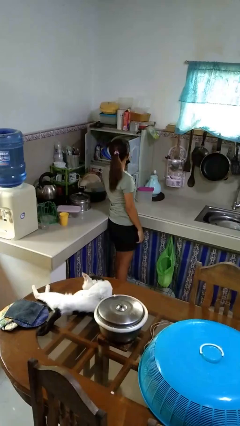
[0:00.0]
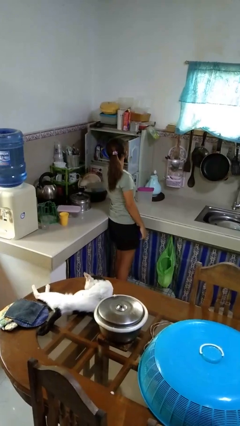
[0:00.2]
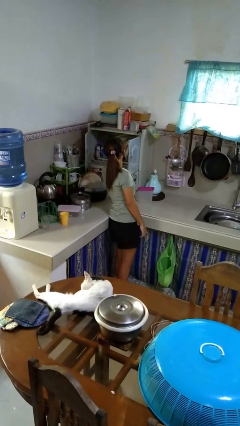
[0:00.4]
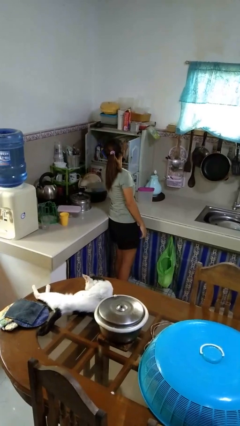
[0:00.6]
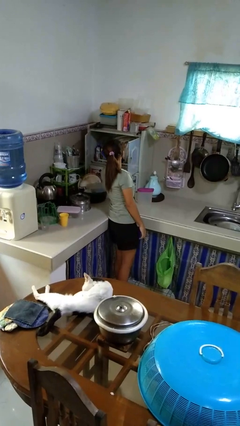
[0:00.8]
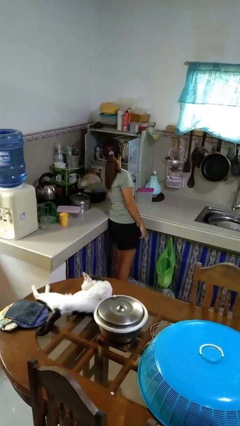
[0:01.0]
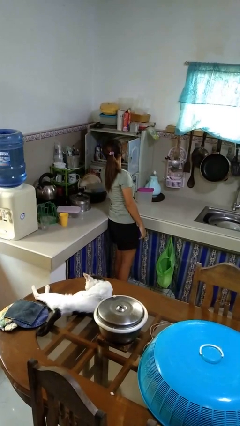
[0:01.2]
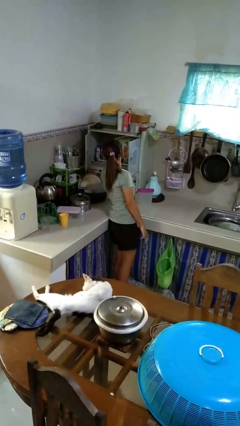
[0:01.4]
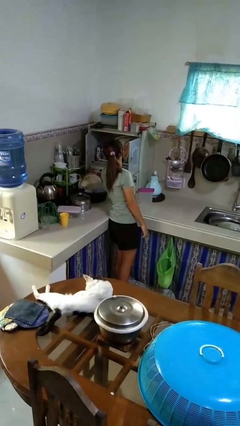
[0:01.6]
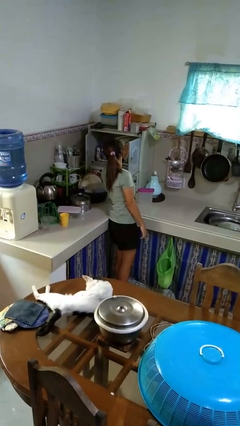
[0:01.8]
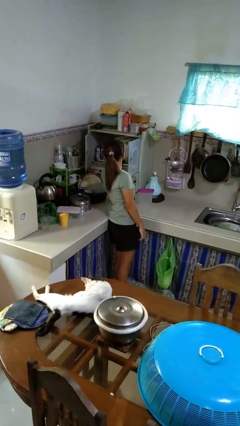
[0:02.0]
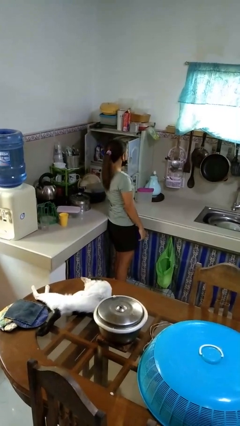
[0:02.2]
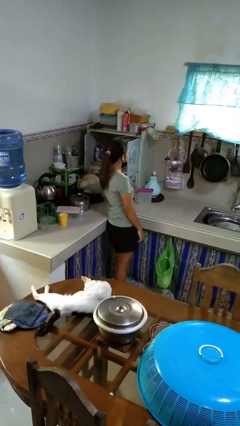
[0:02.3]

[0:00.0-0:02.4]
person searches in kitchen drawer

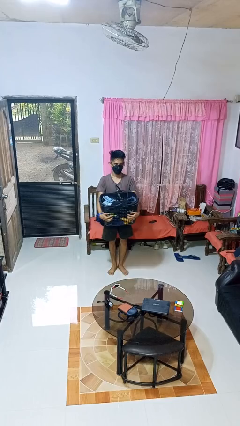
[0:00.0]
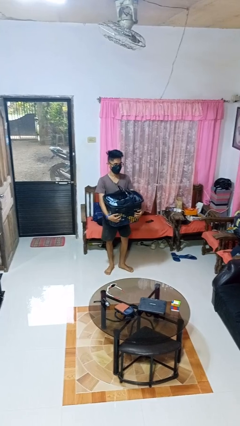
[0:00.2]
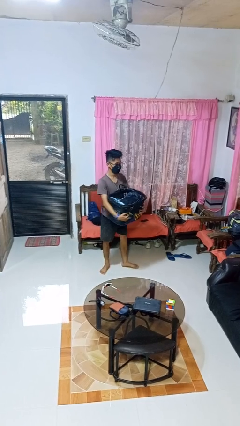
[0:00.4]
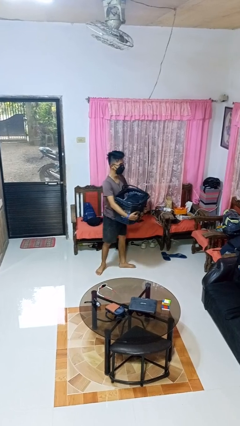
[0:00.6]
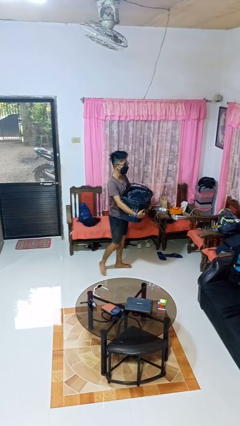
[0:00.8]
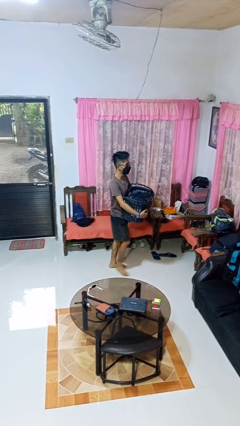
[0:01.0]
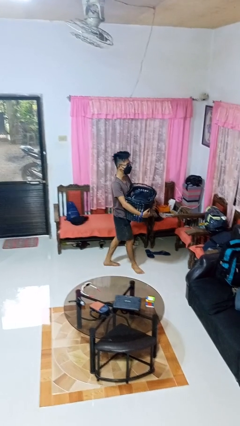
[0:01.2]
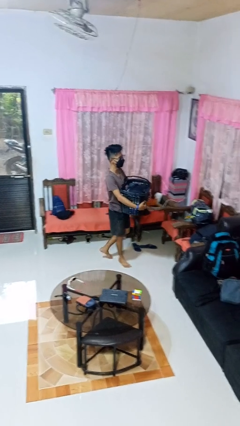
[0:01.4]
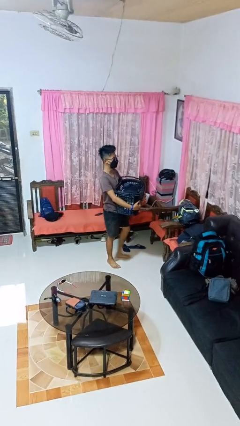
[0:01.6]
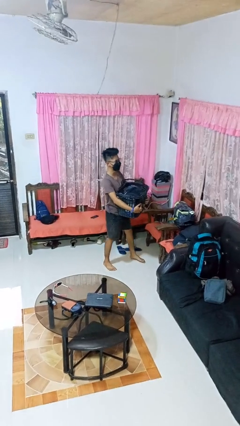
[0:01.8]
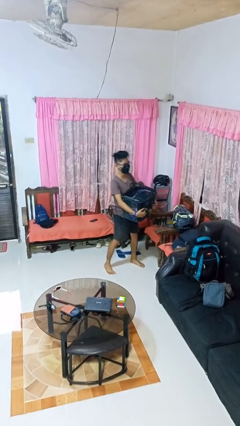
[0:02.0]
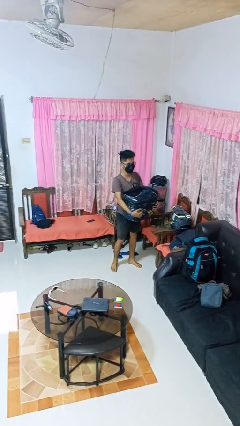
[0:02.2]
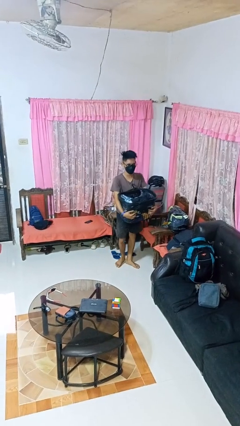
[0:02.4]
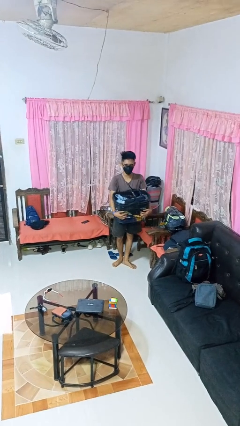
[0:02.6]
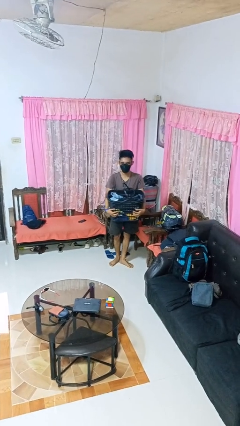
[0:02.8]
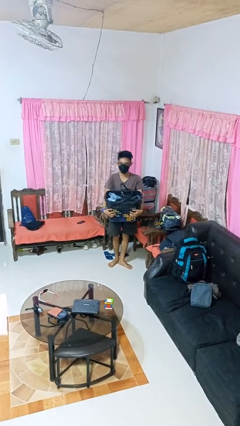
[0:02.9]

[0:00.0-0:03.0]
person carries laundry basket

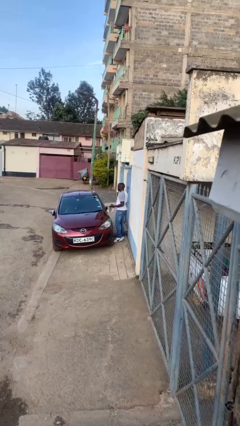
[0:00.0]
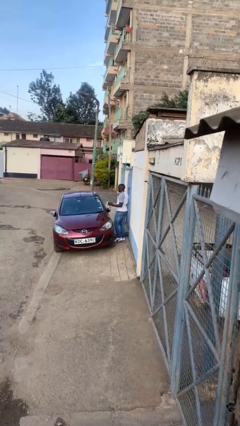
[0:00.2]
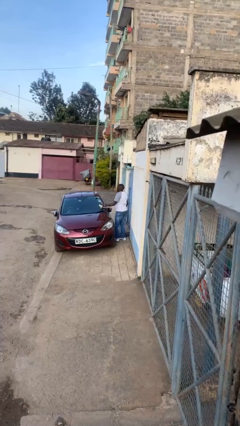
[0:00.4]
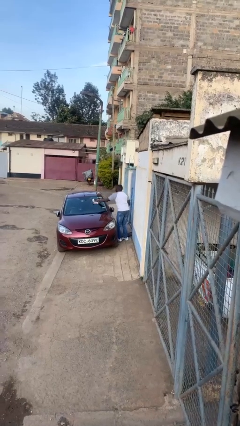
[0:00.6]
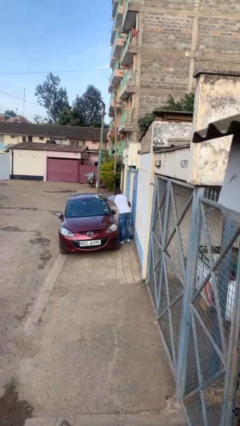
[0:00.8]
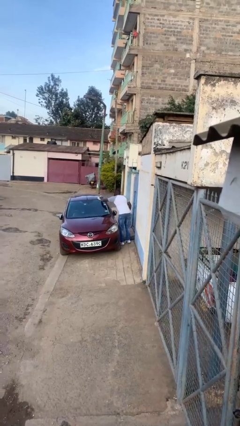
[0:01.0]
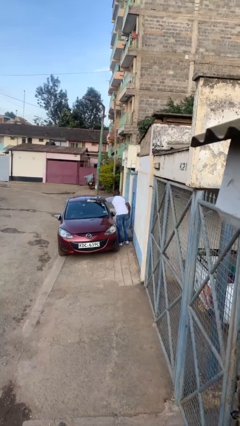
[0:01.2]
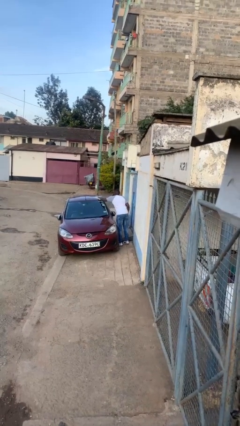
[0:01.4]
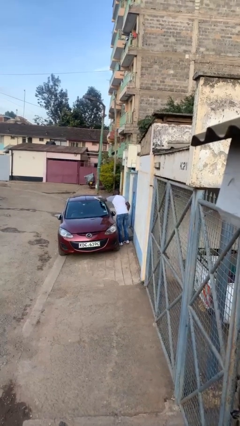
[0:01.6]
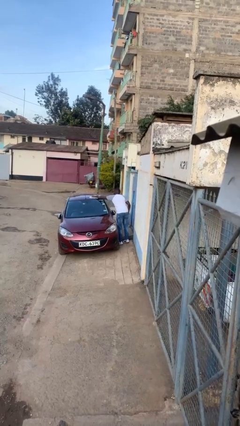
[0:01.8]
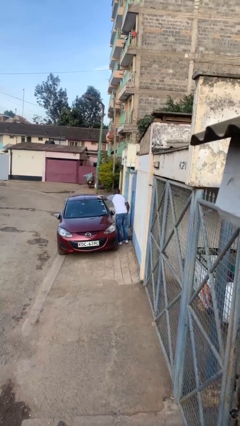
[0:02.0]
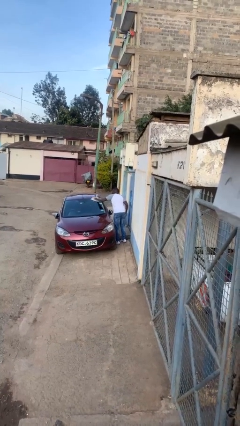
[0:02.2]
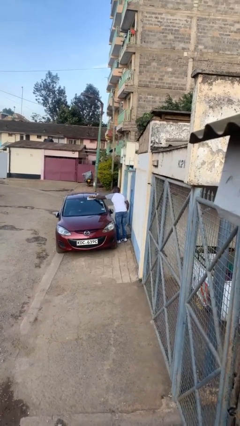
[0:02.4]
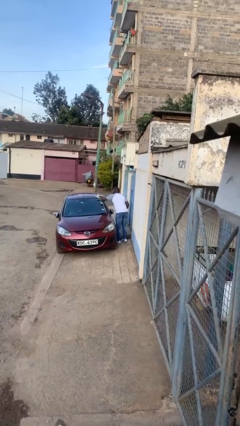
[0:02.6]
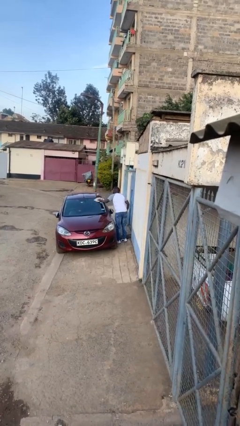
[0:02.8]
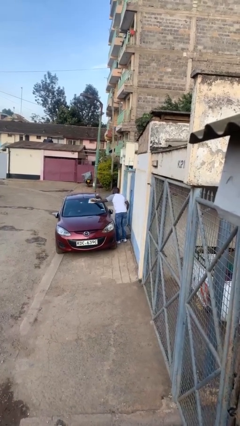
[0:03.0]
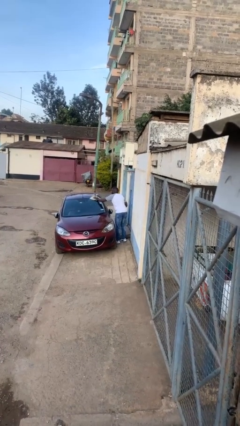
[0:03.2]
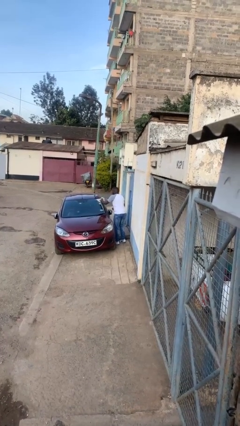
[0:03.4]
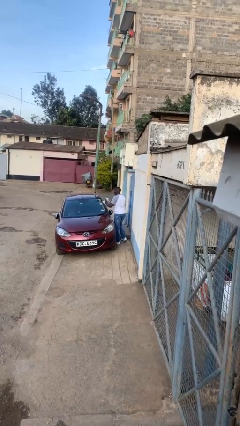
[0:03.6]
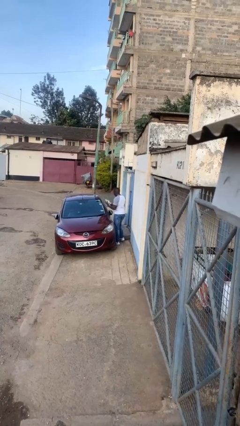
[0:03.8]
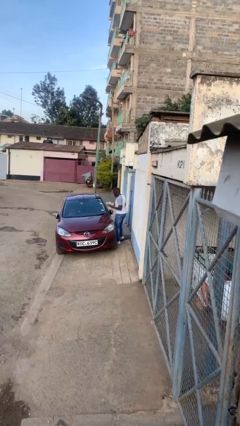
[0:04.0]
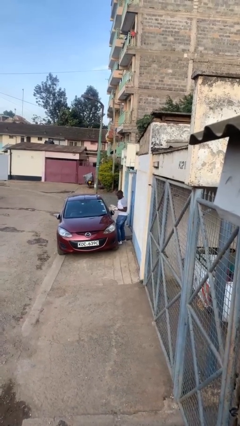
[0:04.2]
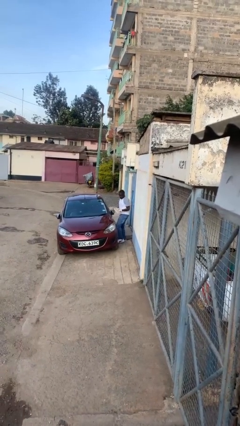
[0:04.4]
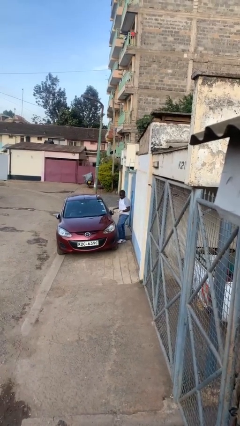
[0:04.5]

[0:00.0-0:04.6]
person polishes car with rag

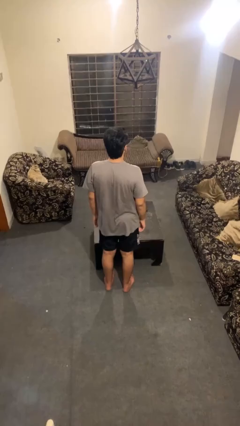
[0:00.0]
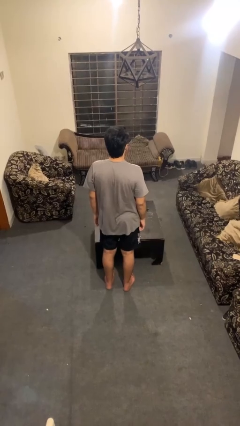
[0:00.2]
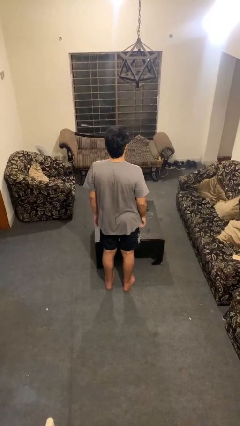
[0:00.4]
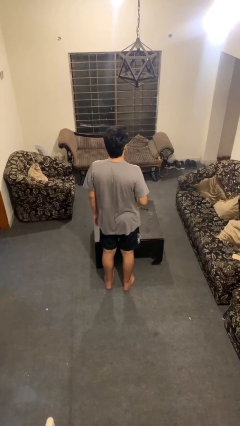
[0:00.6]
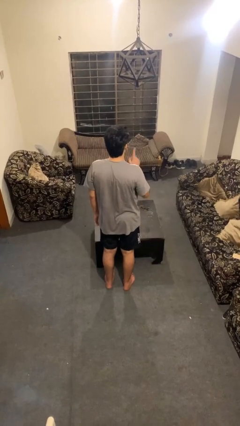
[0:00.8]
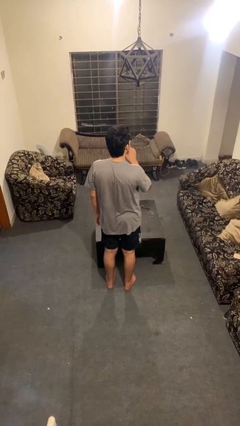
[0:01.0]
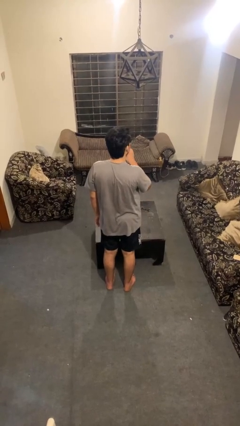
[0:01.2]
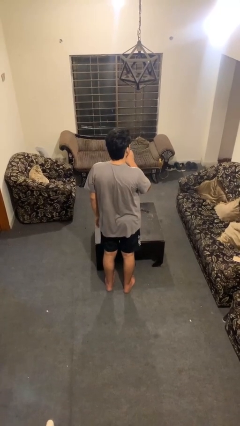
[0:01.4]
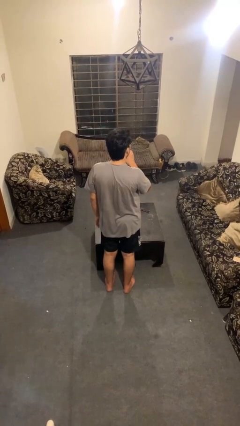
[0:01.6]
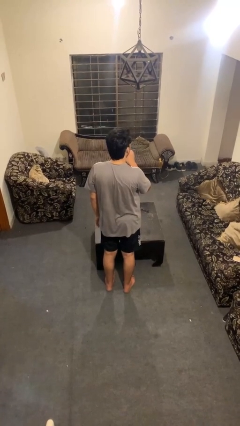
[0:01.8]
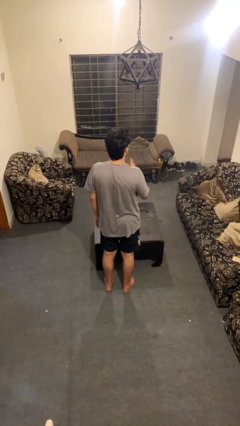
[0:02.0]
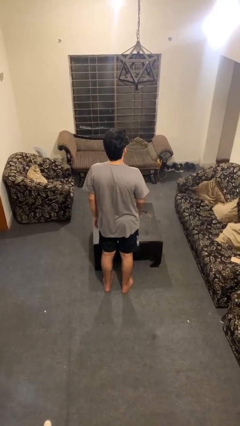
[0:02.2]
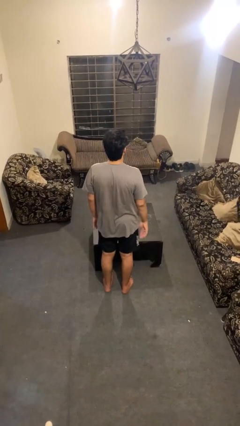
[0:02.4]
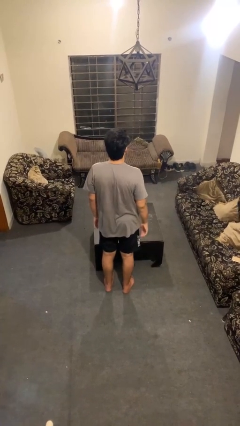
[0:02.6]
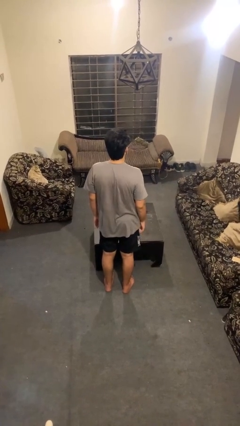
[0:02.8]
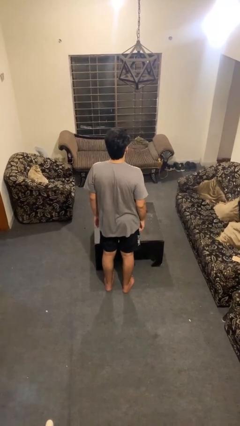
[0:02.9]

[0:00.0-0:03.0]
person gestures be quiet

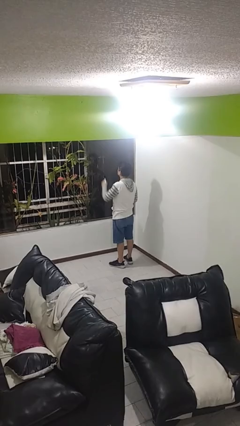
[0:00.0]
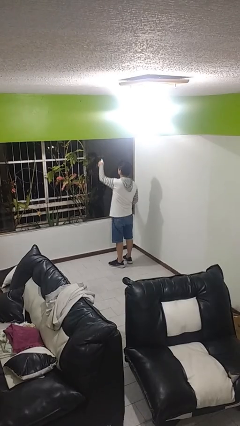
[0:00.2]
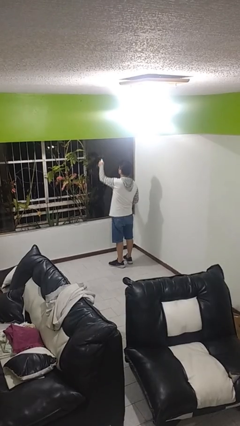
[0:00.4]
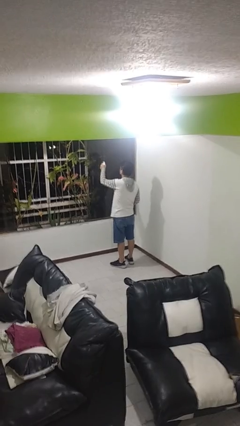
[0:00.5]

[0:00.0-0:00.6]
person sprays from bottle

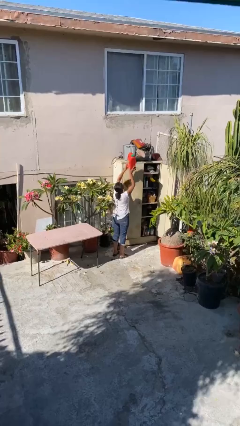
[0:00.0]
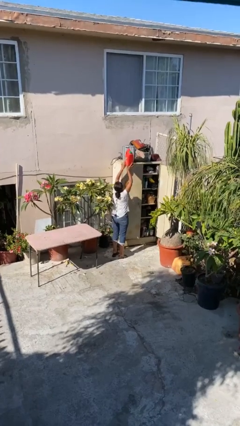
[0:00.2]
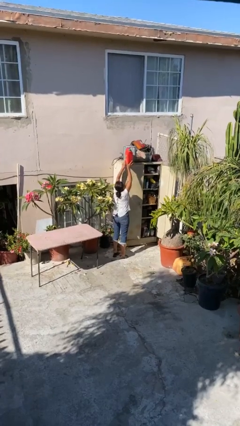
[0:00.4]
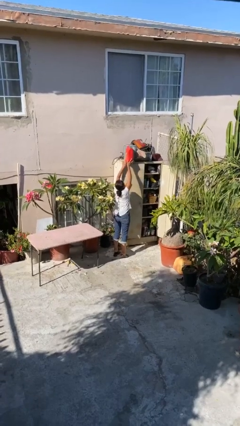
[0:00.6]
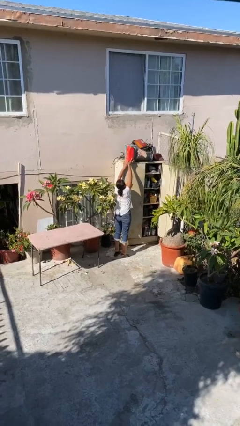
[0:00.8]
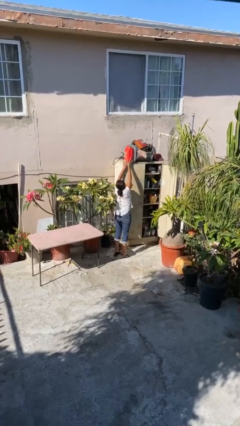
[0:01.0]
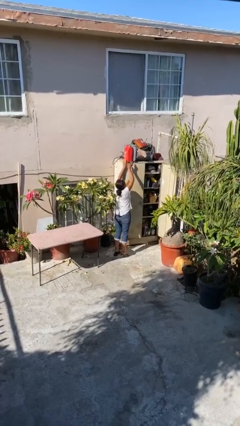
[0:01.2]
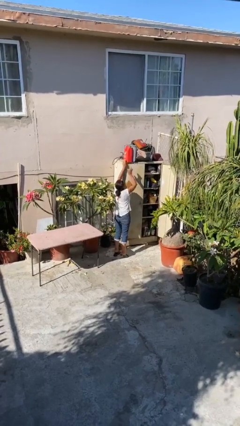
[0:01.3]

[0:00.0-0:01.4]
person puts down object on shelf

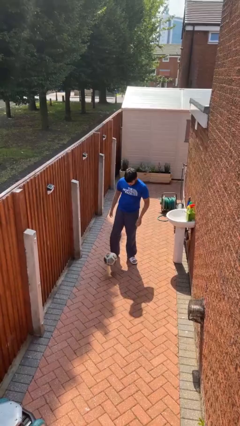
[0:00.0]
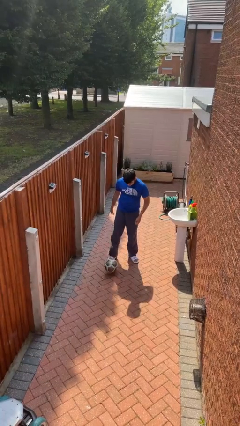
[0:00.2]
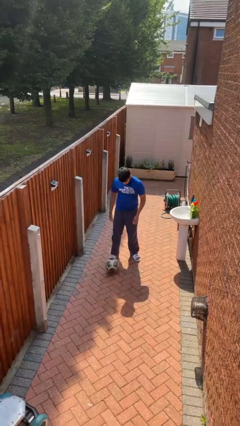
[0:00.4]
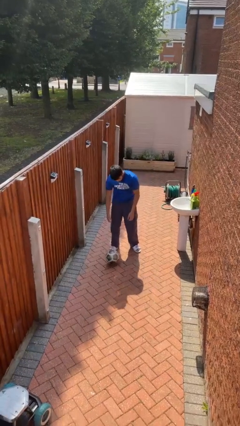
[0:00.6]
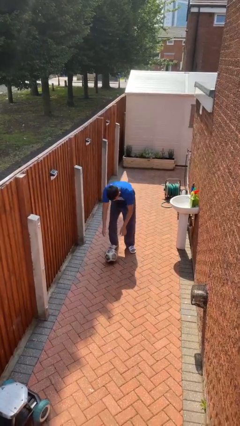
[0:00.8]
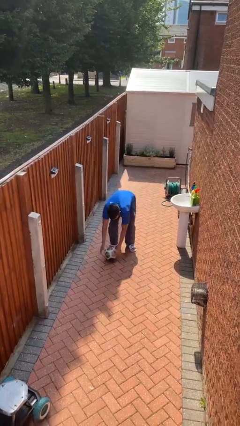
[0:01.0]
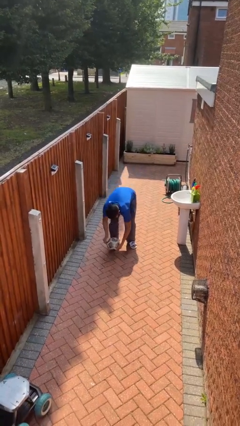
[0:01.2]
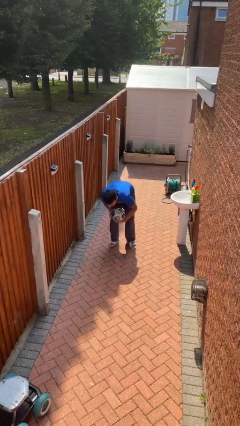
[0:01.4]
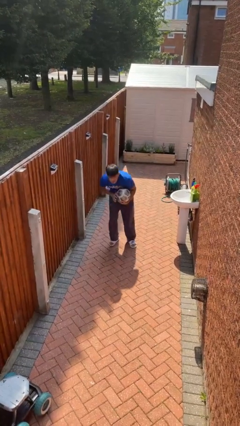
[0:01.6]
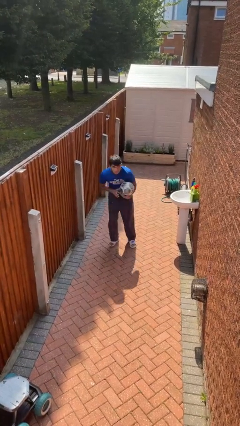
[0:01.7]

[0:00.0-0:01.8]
person picks up object from floor

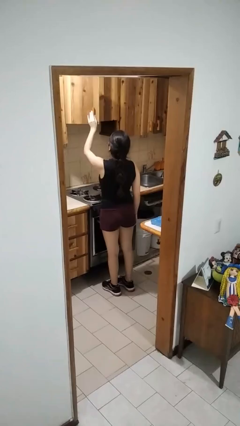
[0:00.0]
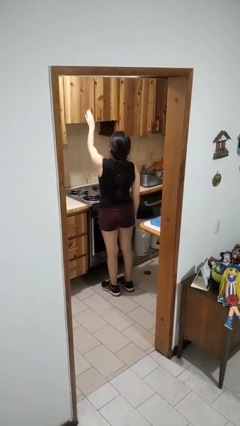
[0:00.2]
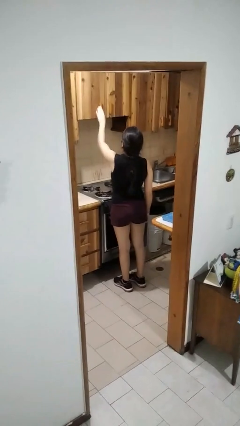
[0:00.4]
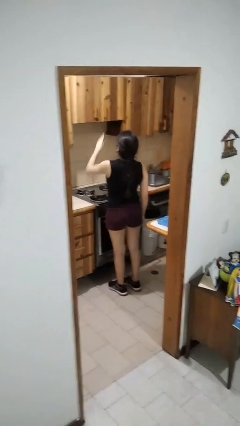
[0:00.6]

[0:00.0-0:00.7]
person closes cabinet
